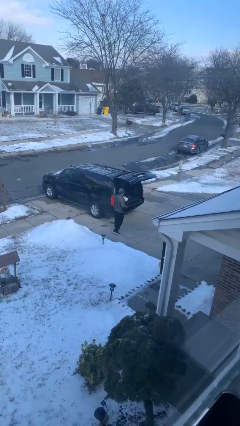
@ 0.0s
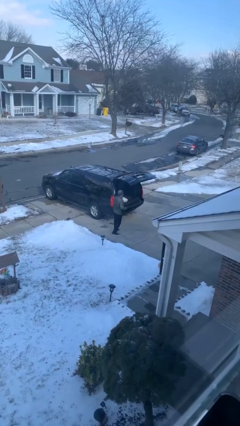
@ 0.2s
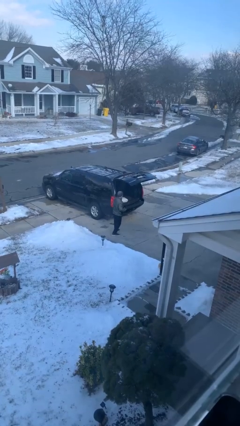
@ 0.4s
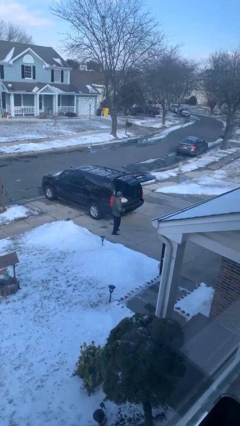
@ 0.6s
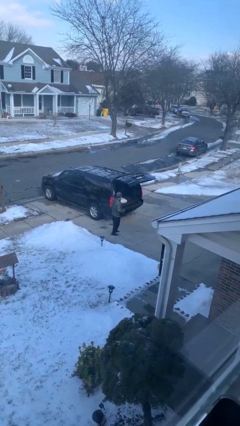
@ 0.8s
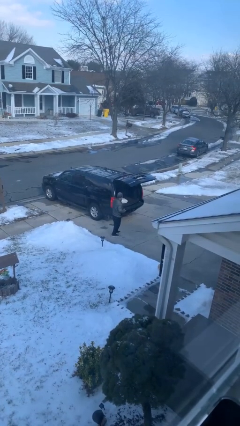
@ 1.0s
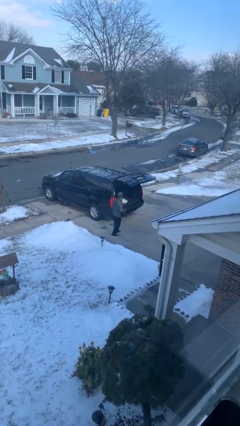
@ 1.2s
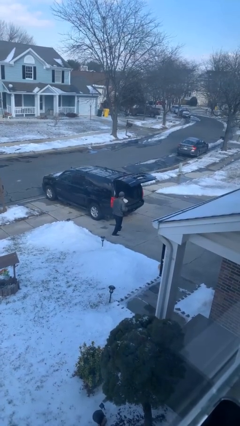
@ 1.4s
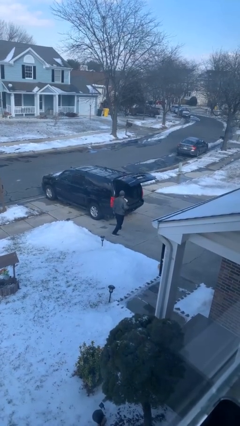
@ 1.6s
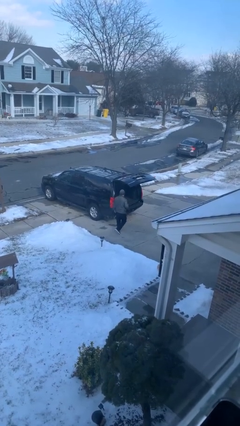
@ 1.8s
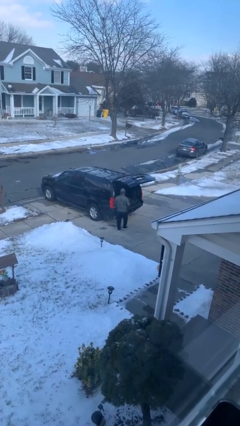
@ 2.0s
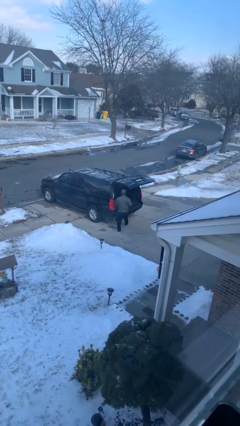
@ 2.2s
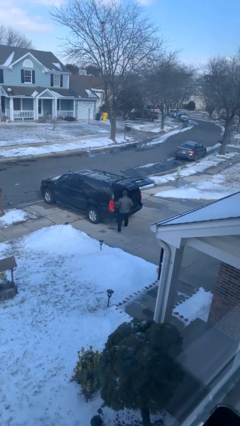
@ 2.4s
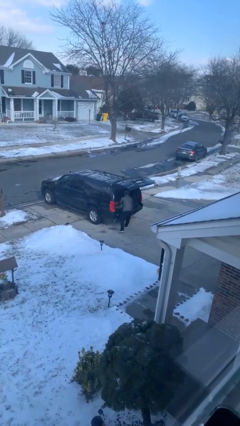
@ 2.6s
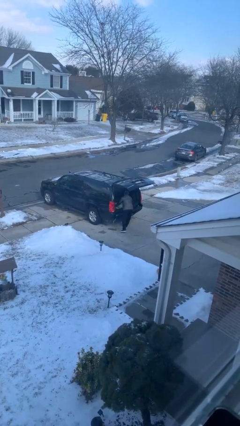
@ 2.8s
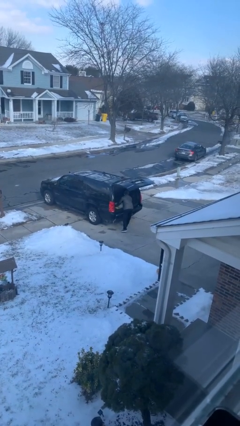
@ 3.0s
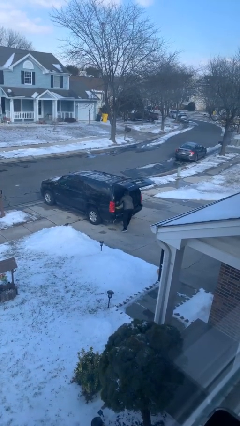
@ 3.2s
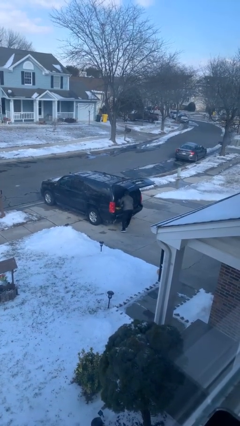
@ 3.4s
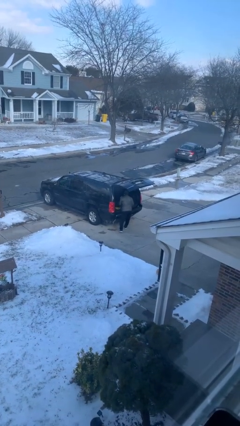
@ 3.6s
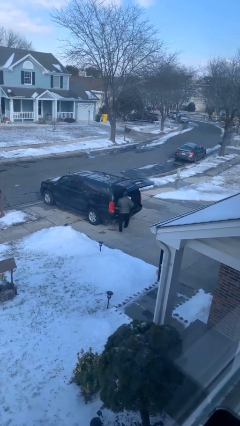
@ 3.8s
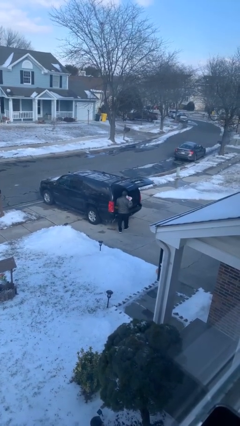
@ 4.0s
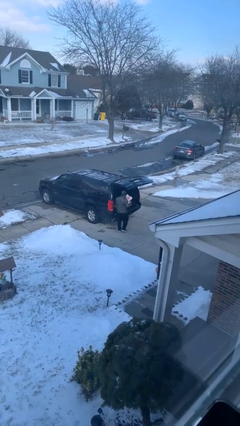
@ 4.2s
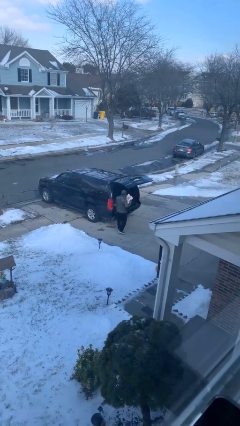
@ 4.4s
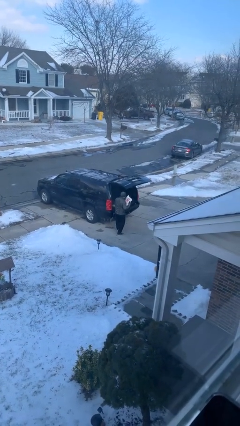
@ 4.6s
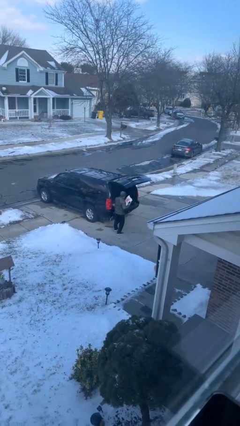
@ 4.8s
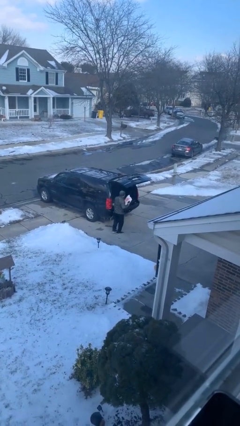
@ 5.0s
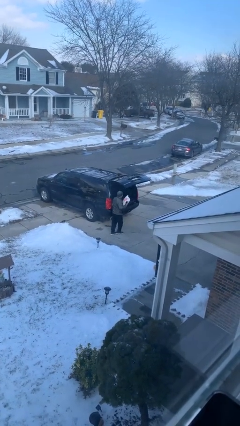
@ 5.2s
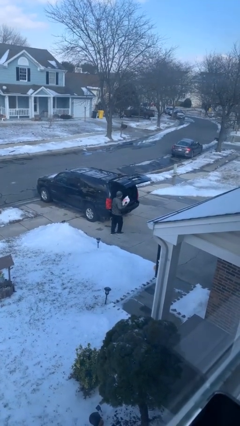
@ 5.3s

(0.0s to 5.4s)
person unloads car

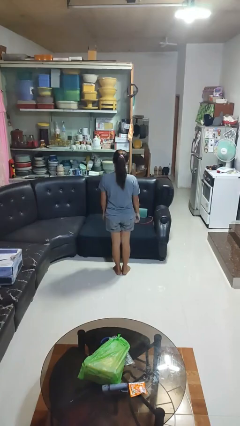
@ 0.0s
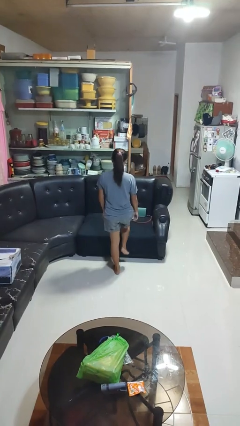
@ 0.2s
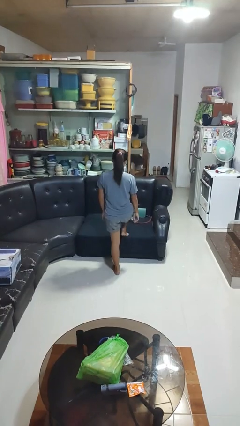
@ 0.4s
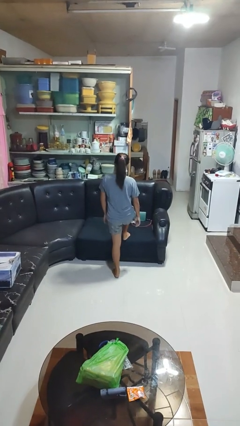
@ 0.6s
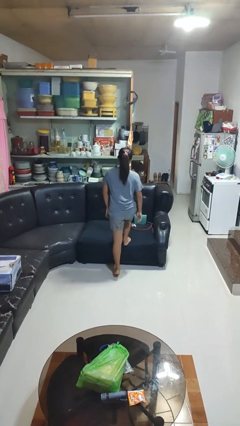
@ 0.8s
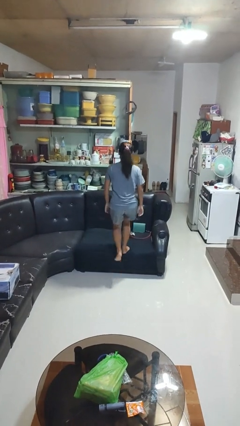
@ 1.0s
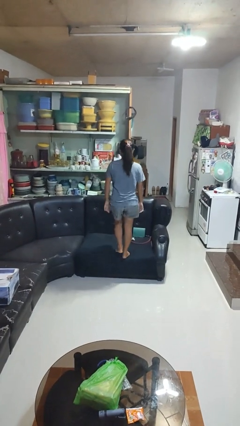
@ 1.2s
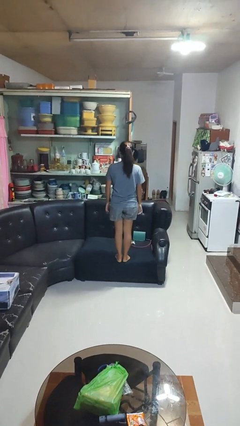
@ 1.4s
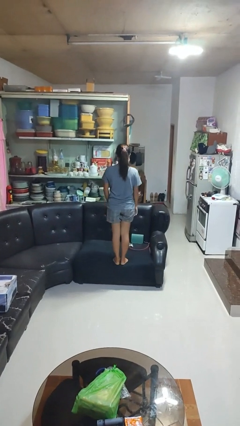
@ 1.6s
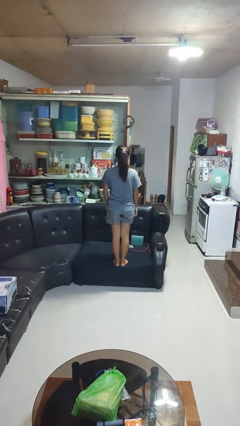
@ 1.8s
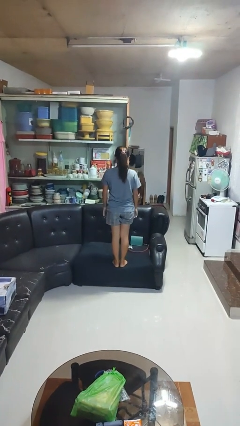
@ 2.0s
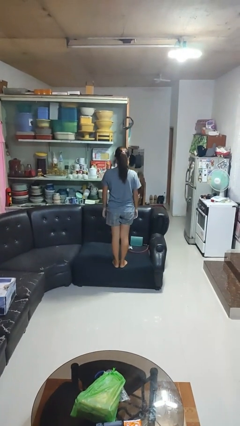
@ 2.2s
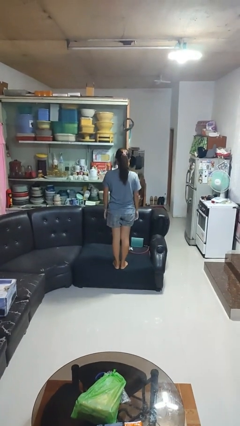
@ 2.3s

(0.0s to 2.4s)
person climbs on couch

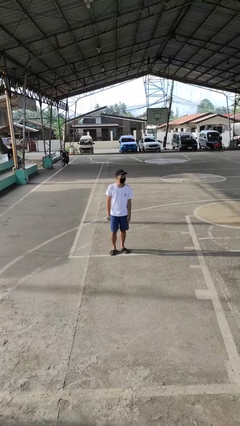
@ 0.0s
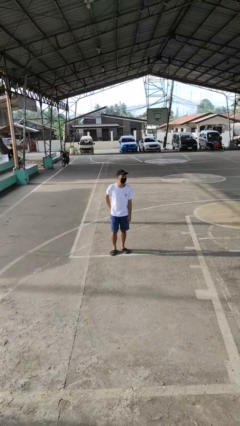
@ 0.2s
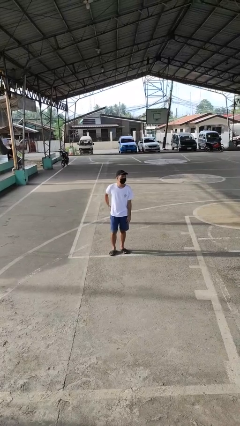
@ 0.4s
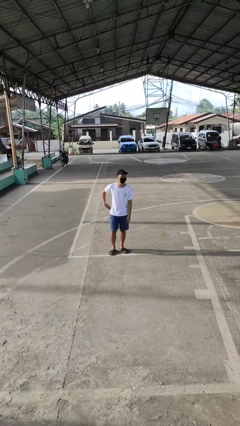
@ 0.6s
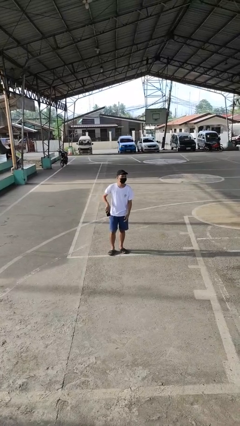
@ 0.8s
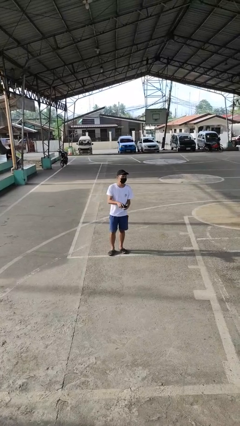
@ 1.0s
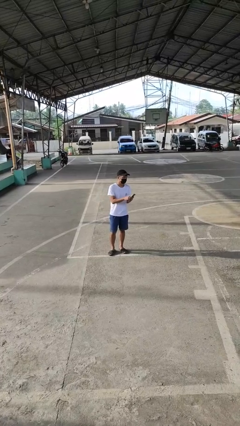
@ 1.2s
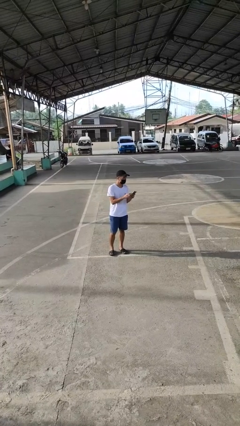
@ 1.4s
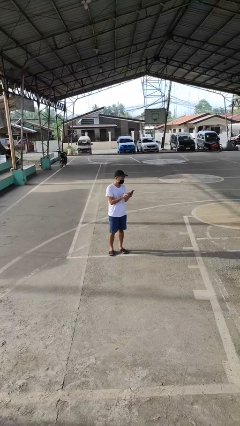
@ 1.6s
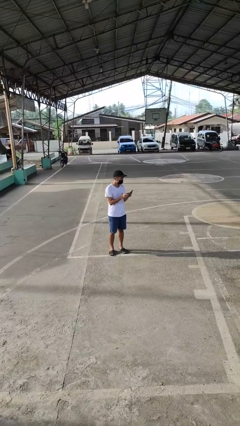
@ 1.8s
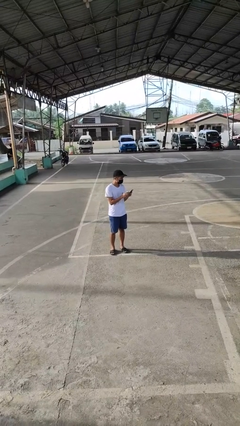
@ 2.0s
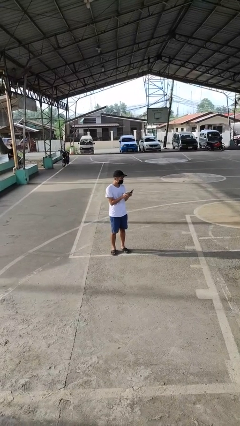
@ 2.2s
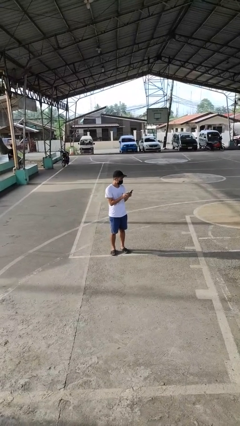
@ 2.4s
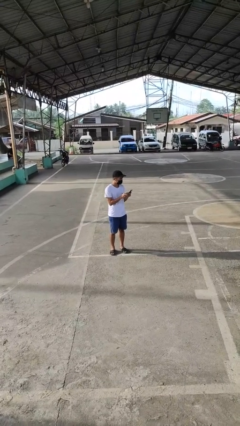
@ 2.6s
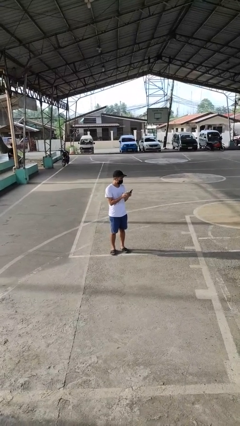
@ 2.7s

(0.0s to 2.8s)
person takes phone from pocket

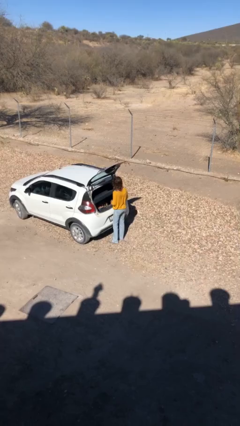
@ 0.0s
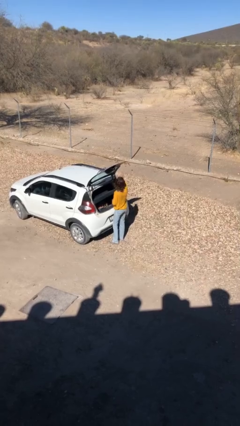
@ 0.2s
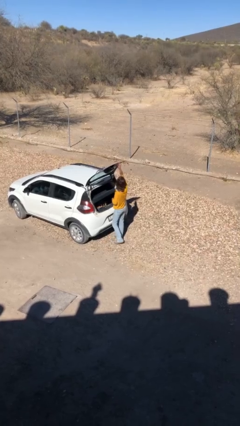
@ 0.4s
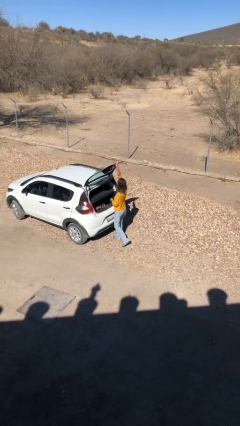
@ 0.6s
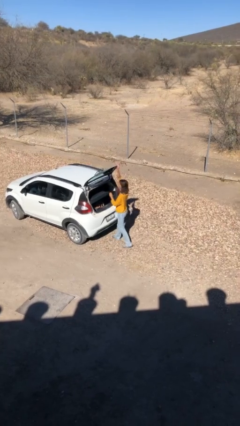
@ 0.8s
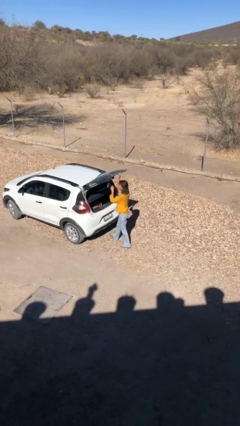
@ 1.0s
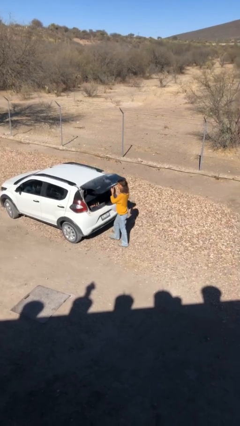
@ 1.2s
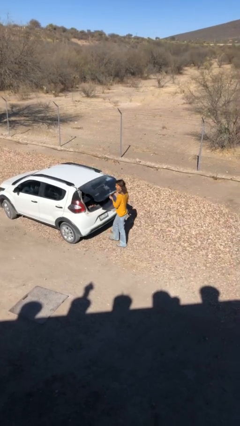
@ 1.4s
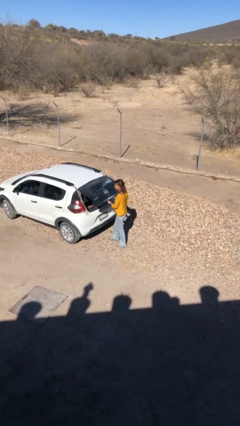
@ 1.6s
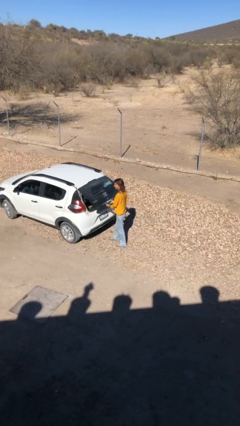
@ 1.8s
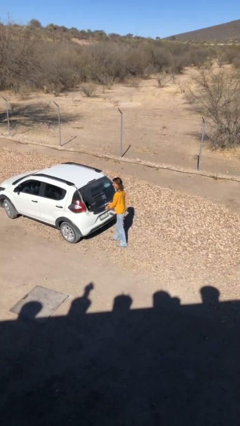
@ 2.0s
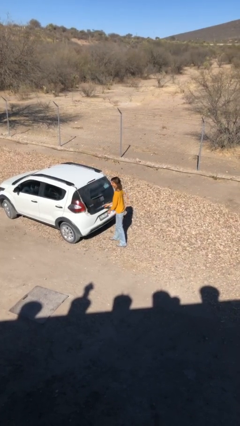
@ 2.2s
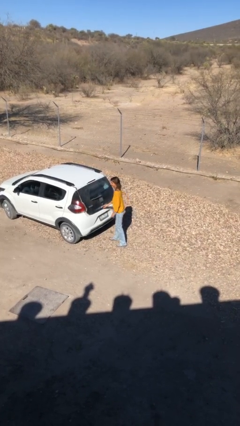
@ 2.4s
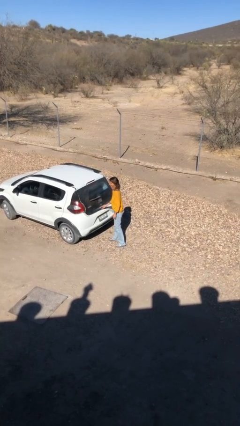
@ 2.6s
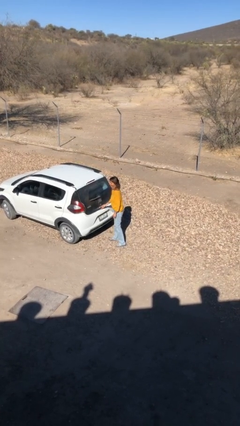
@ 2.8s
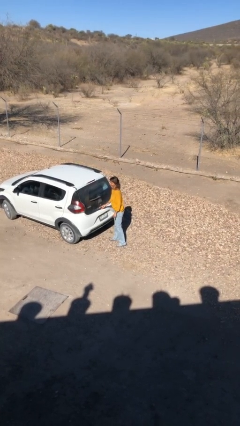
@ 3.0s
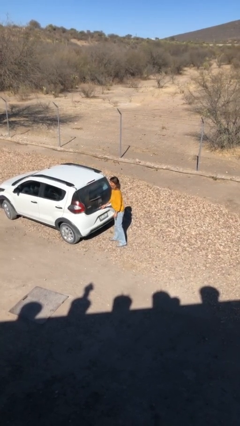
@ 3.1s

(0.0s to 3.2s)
person closes car trunk

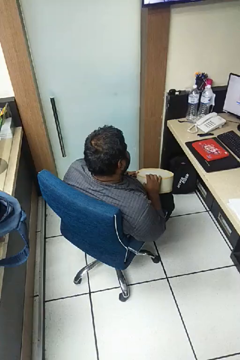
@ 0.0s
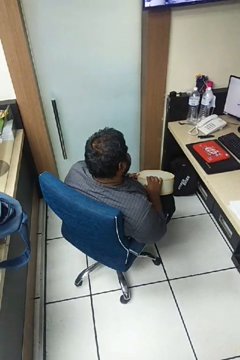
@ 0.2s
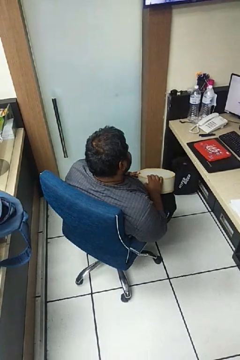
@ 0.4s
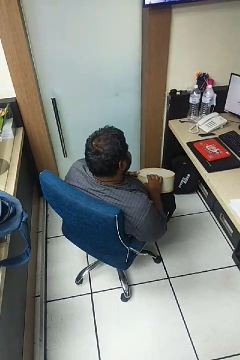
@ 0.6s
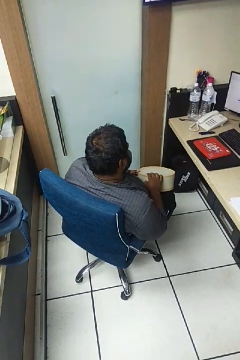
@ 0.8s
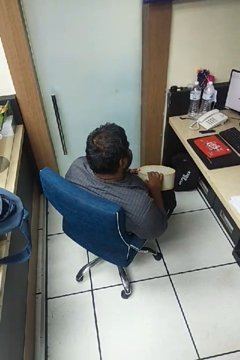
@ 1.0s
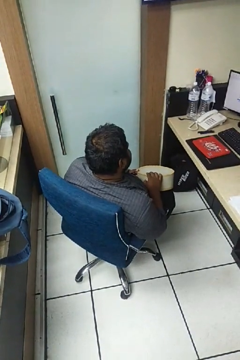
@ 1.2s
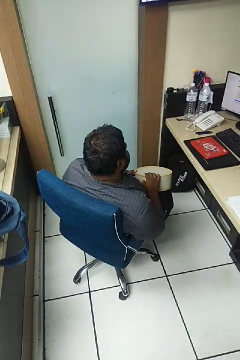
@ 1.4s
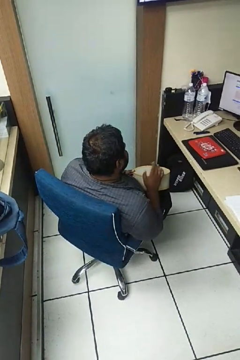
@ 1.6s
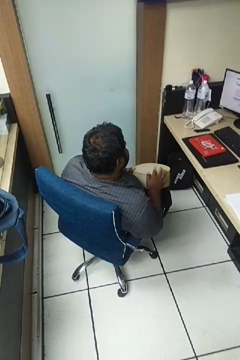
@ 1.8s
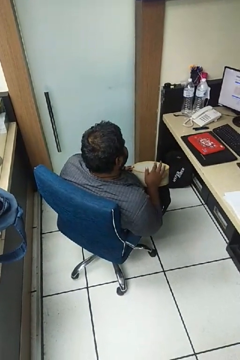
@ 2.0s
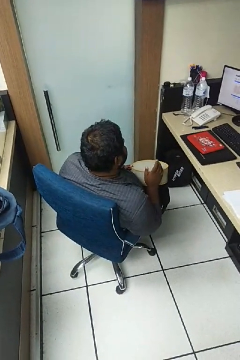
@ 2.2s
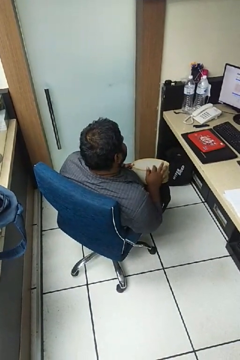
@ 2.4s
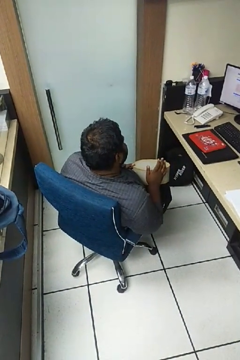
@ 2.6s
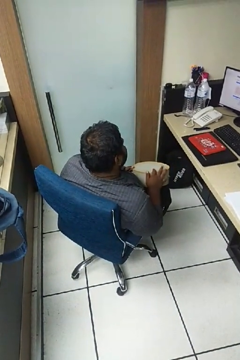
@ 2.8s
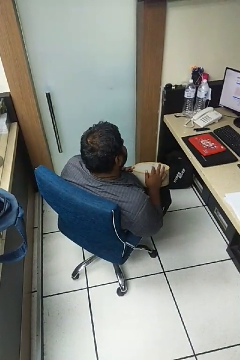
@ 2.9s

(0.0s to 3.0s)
person taps object with finger

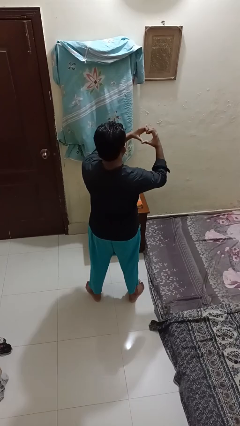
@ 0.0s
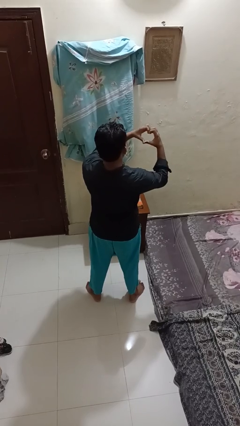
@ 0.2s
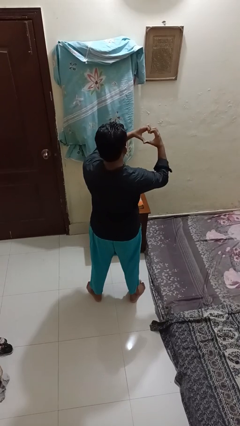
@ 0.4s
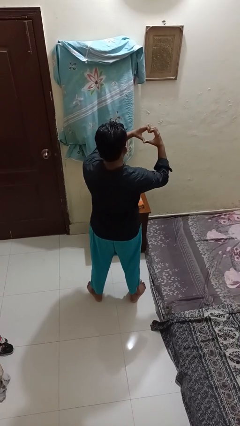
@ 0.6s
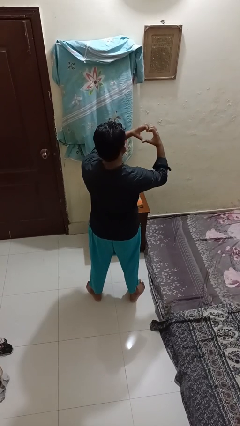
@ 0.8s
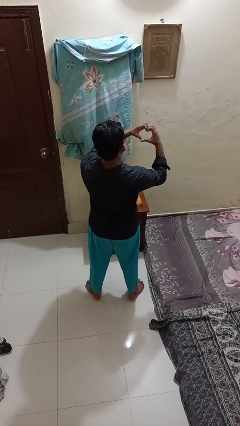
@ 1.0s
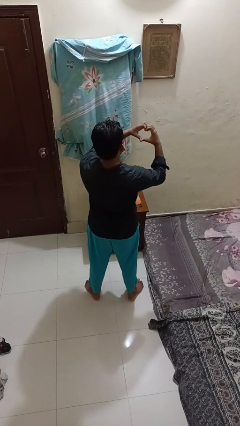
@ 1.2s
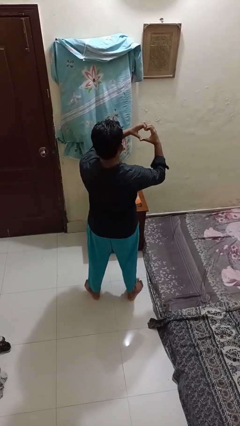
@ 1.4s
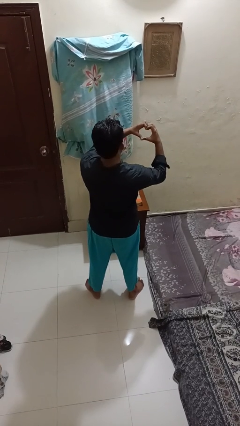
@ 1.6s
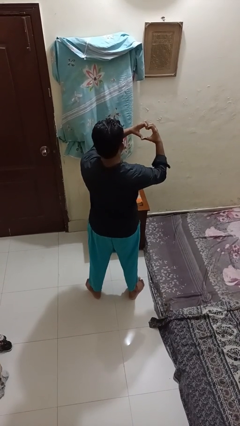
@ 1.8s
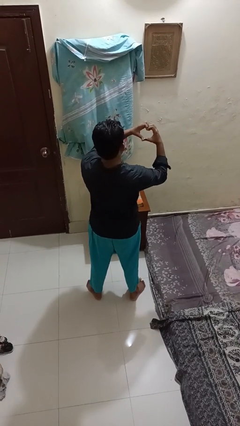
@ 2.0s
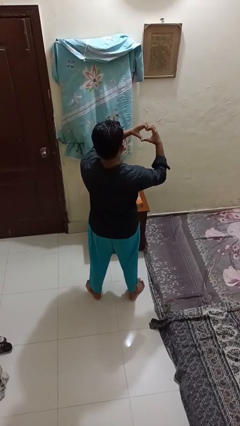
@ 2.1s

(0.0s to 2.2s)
person gestures heart
